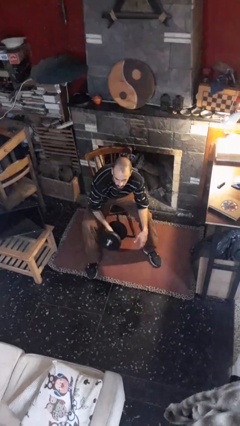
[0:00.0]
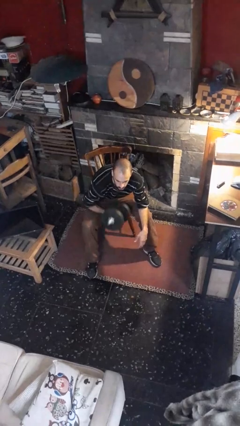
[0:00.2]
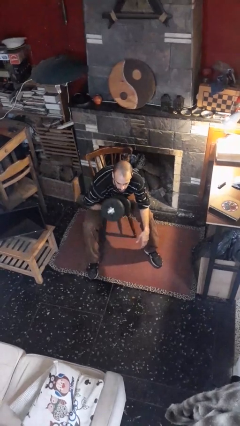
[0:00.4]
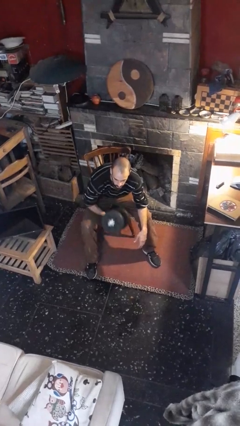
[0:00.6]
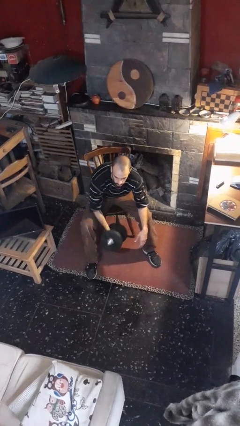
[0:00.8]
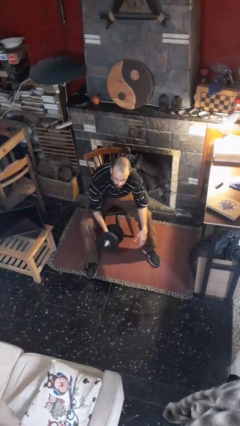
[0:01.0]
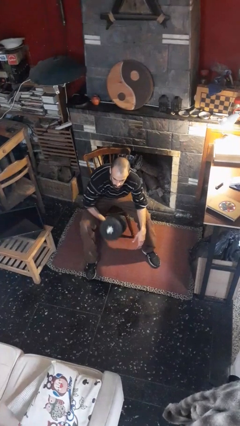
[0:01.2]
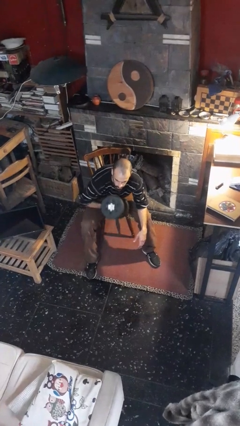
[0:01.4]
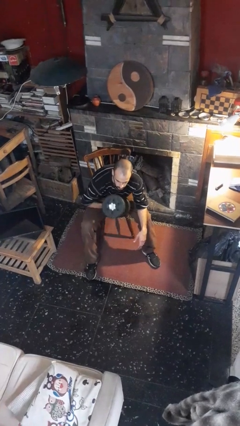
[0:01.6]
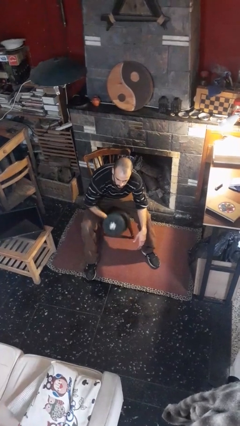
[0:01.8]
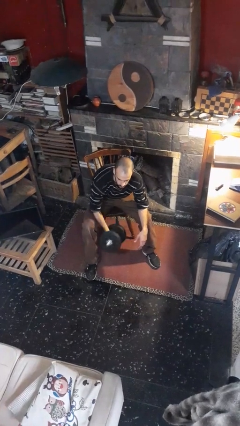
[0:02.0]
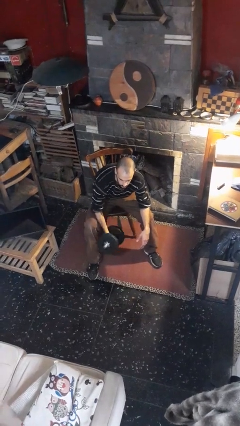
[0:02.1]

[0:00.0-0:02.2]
person lifts dumbbells

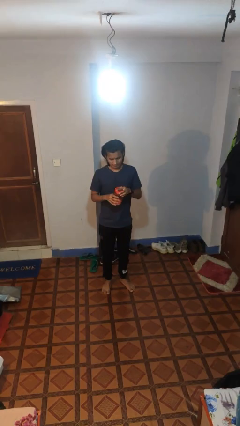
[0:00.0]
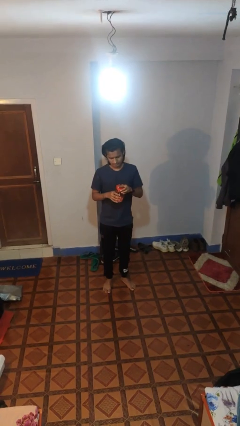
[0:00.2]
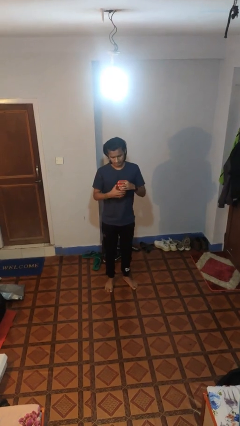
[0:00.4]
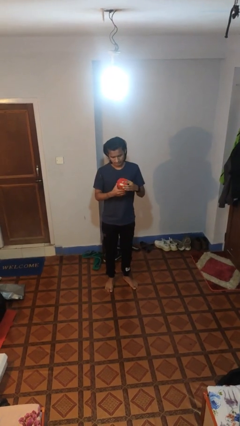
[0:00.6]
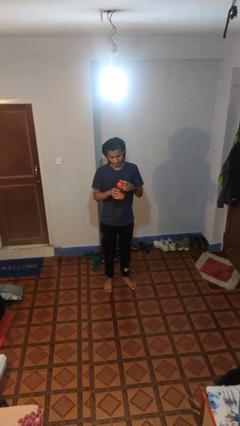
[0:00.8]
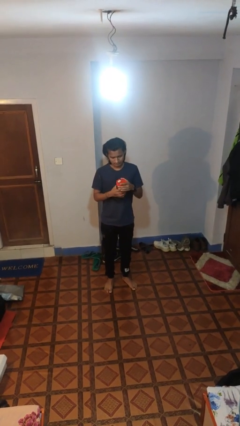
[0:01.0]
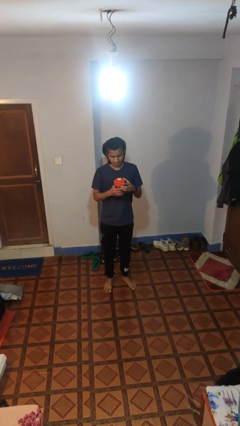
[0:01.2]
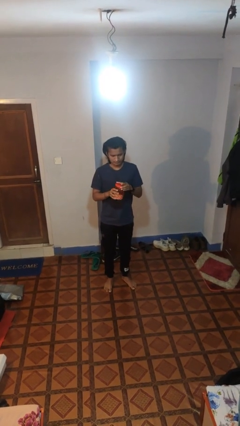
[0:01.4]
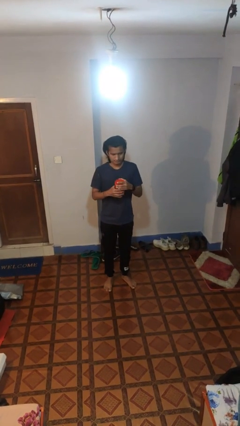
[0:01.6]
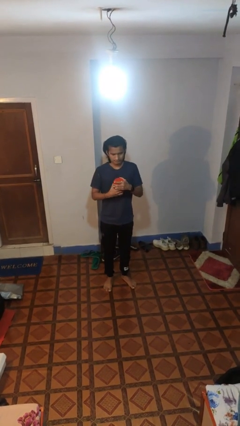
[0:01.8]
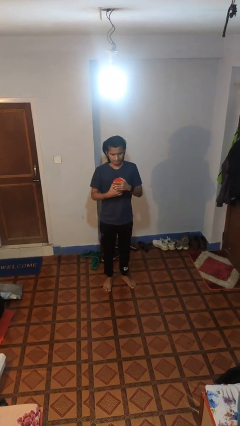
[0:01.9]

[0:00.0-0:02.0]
person closes jar

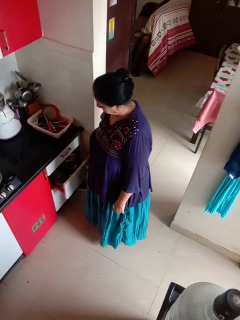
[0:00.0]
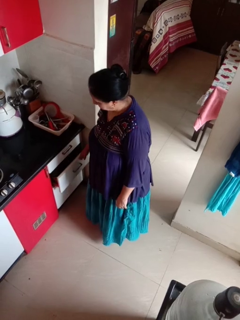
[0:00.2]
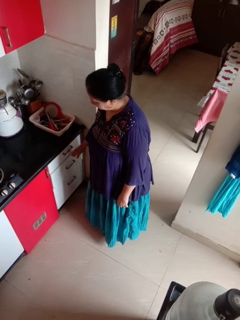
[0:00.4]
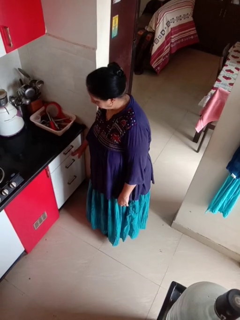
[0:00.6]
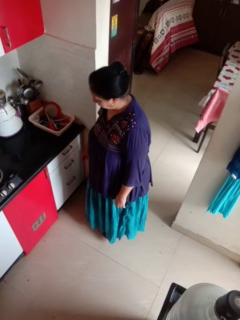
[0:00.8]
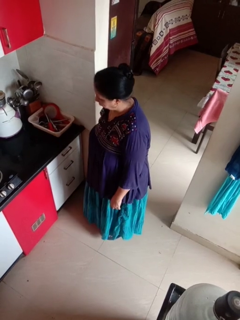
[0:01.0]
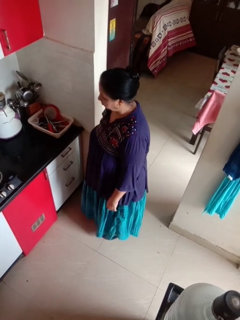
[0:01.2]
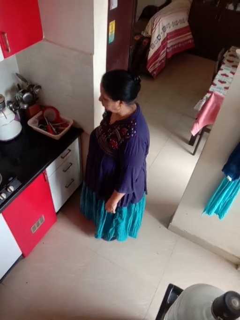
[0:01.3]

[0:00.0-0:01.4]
person closes kitchen drawer

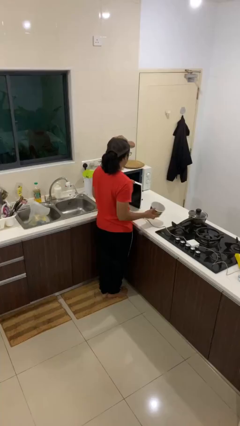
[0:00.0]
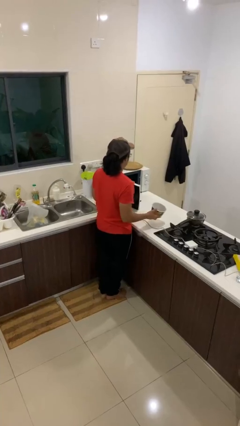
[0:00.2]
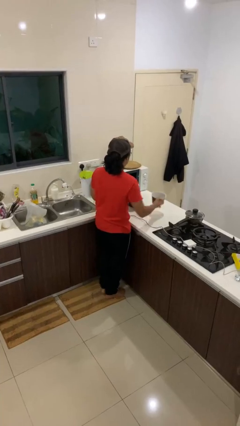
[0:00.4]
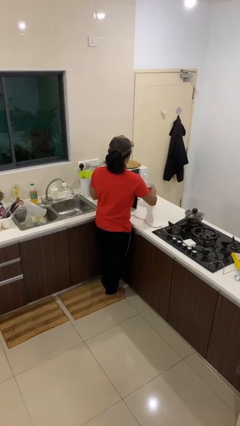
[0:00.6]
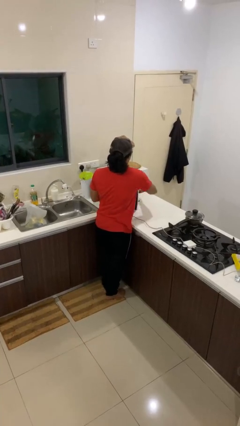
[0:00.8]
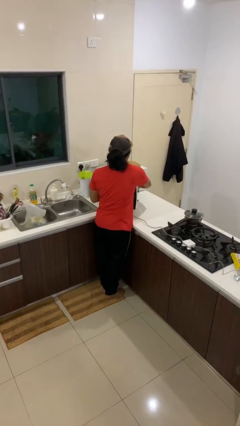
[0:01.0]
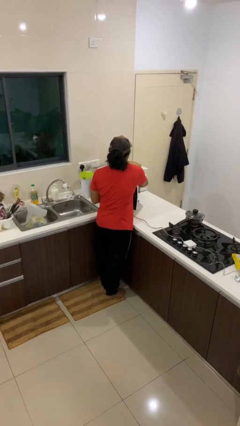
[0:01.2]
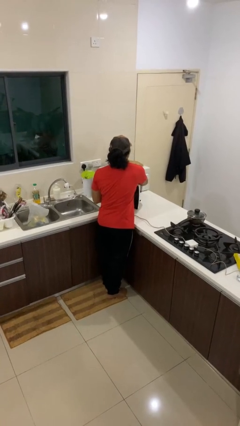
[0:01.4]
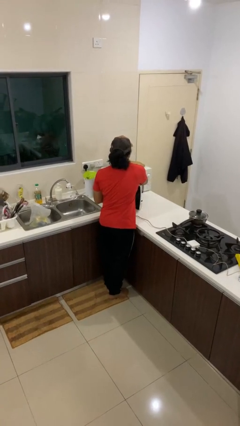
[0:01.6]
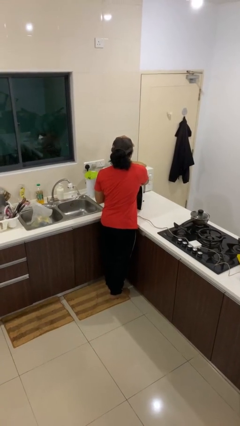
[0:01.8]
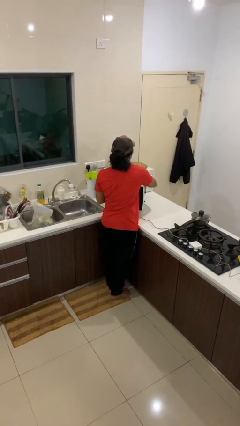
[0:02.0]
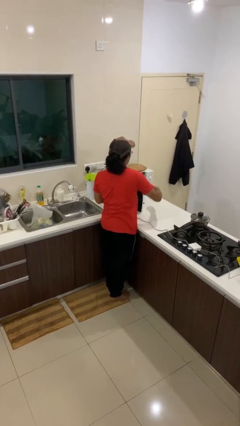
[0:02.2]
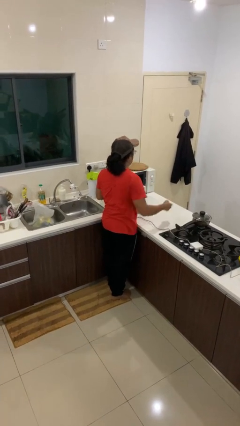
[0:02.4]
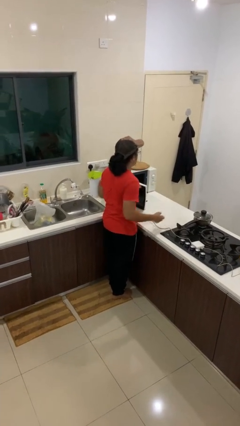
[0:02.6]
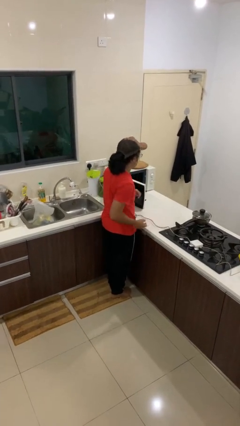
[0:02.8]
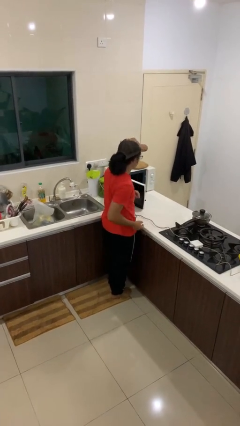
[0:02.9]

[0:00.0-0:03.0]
person puts object into microwave

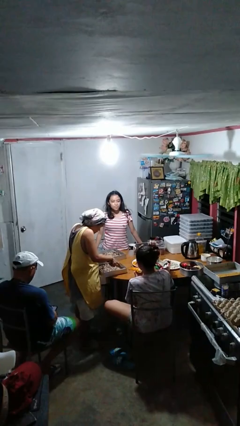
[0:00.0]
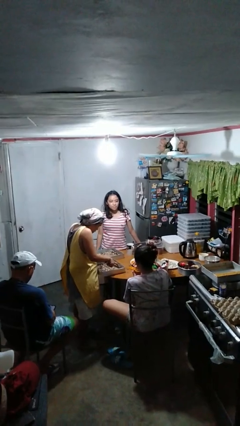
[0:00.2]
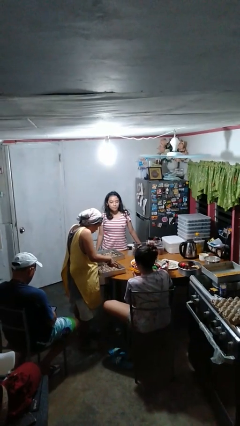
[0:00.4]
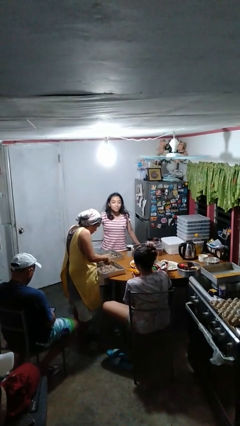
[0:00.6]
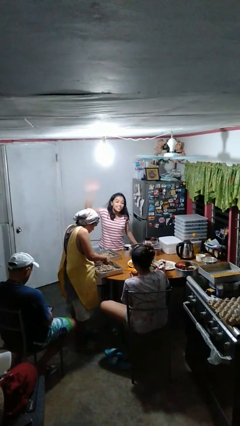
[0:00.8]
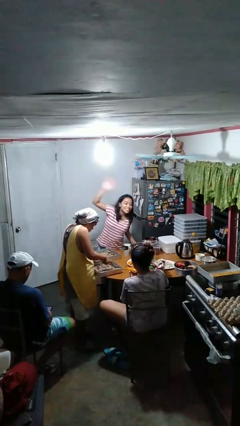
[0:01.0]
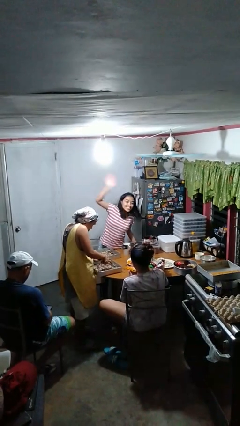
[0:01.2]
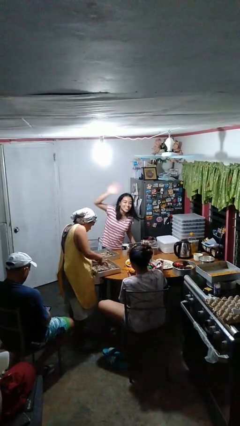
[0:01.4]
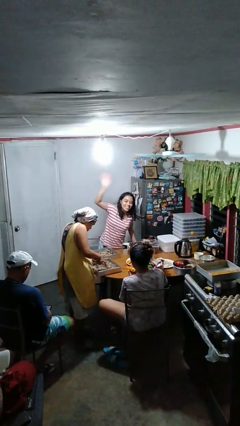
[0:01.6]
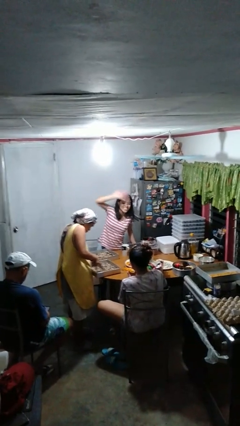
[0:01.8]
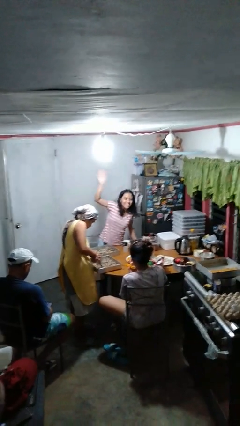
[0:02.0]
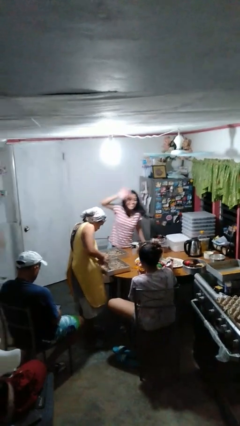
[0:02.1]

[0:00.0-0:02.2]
person waves at person

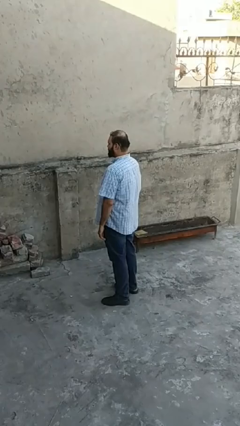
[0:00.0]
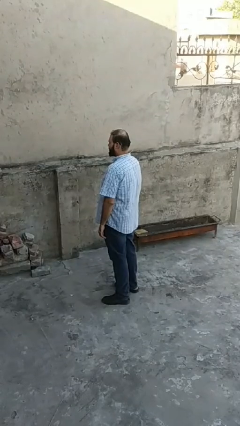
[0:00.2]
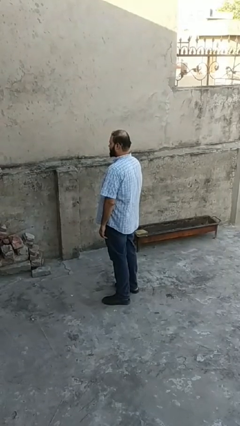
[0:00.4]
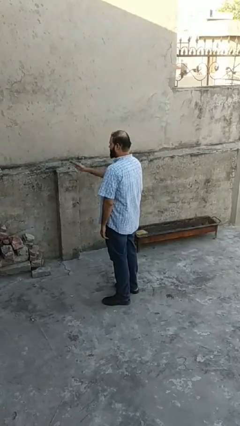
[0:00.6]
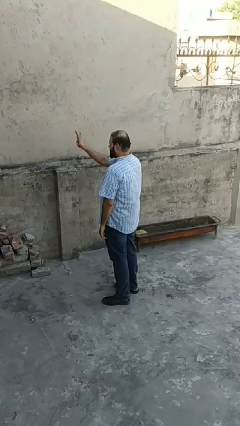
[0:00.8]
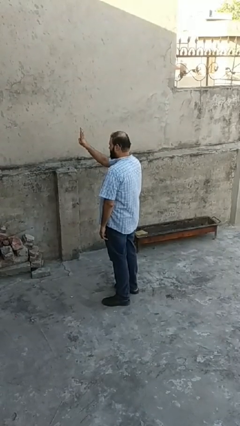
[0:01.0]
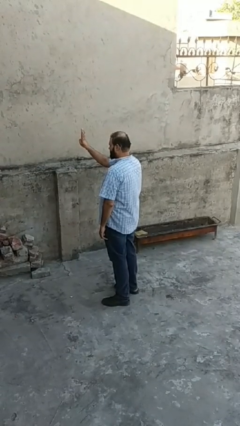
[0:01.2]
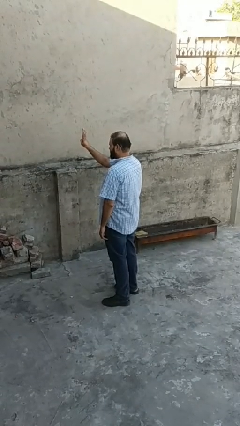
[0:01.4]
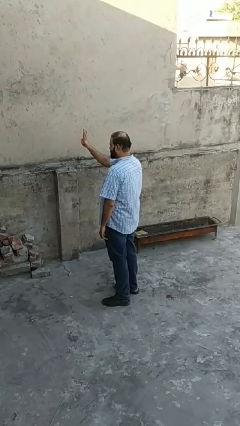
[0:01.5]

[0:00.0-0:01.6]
person gestures number four

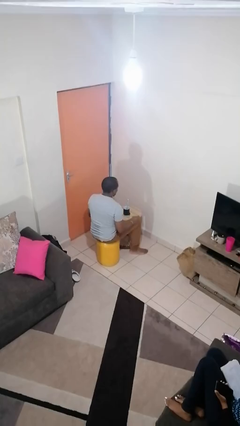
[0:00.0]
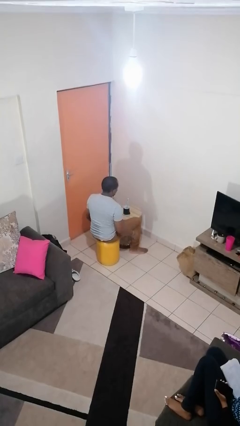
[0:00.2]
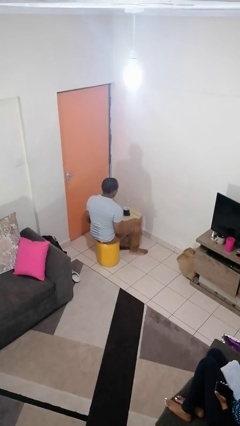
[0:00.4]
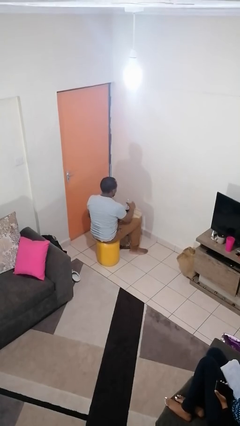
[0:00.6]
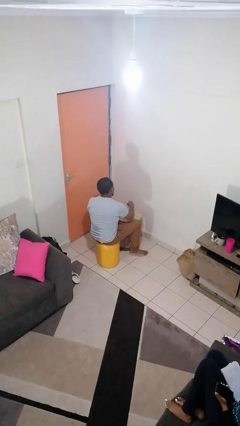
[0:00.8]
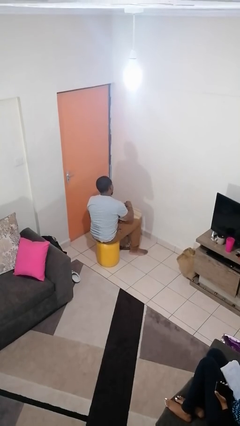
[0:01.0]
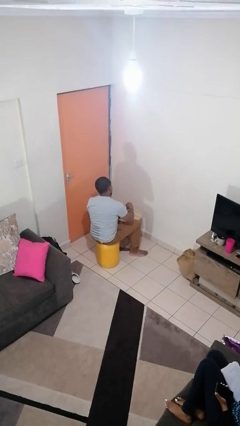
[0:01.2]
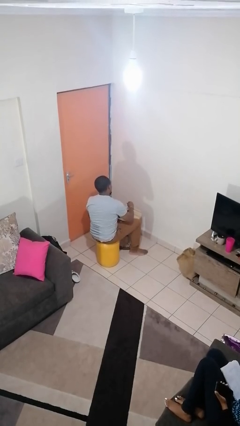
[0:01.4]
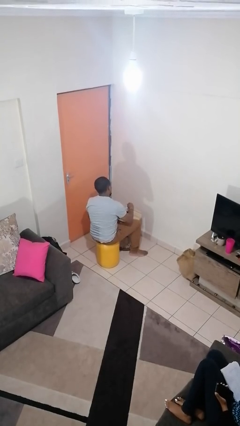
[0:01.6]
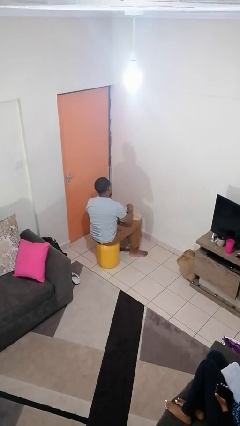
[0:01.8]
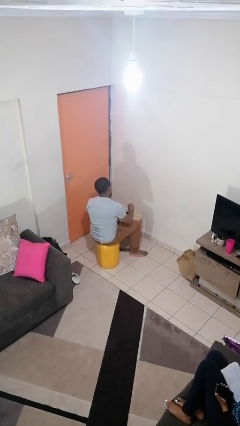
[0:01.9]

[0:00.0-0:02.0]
person stirs mug

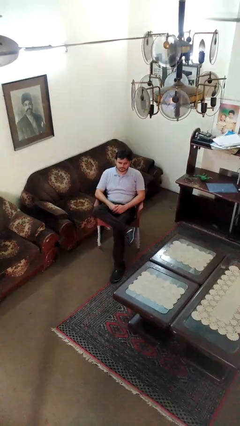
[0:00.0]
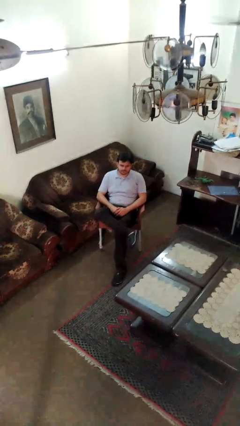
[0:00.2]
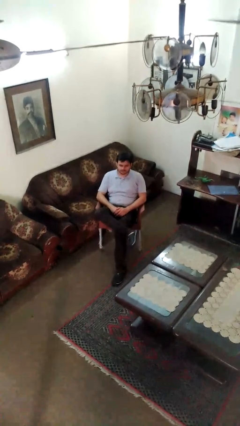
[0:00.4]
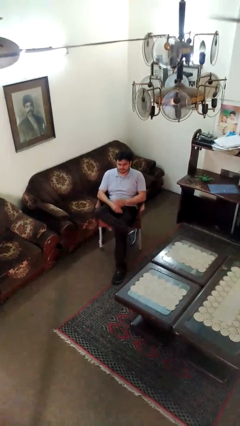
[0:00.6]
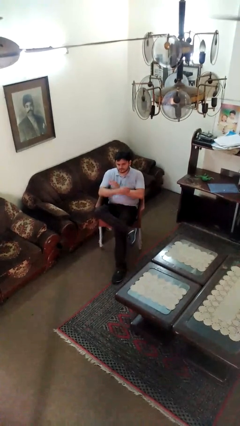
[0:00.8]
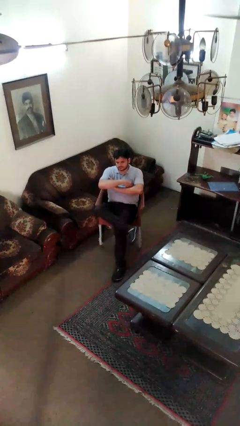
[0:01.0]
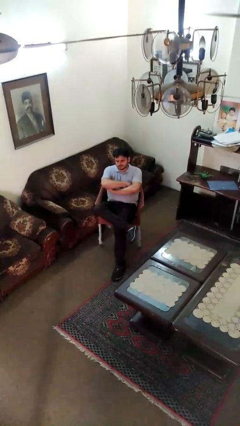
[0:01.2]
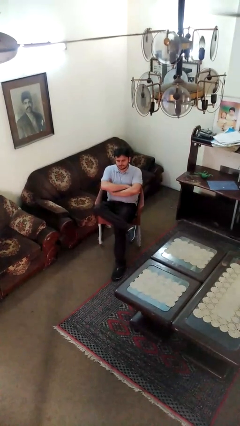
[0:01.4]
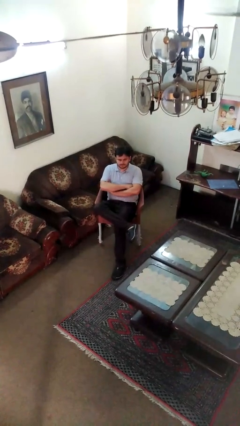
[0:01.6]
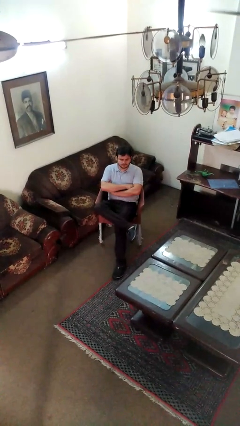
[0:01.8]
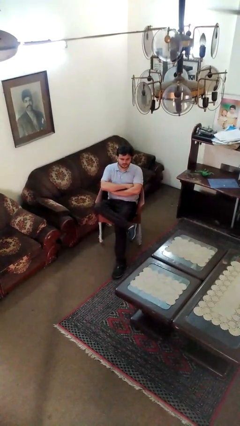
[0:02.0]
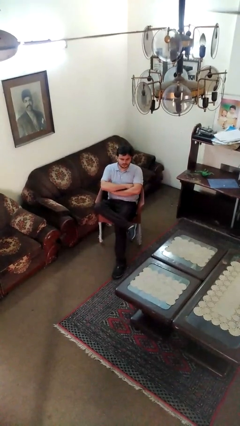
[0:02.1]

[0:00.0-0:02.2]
person crosses arms

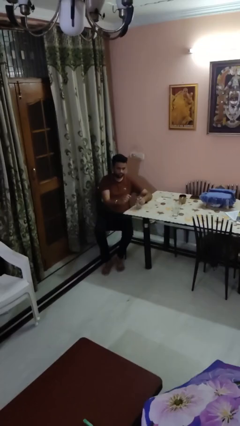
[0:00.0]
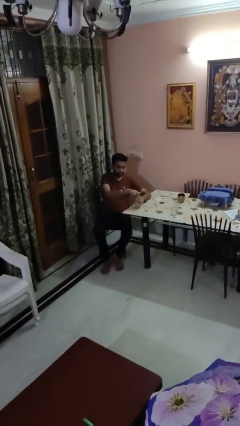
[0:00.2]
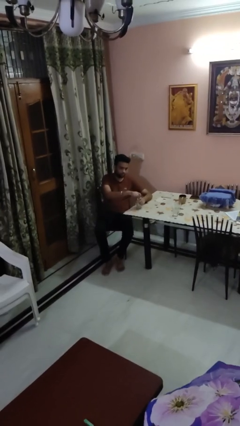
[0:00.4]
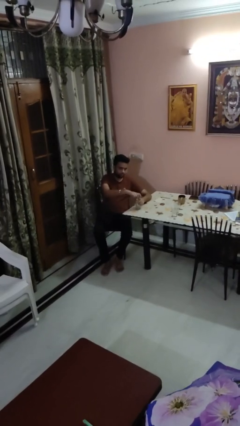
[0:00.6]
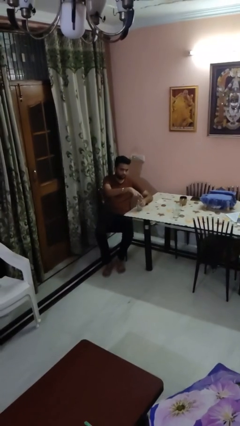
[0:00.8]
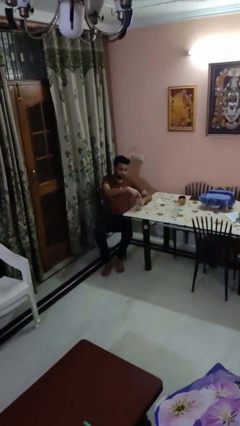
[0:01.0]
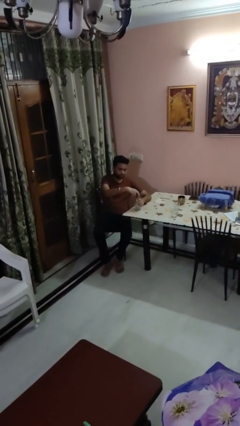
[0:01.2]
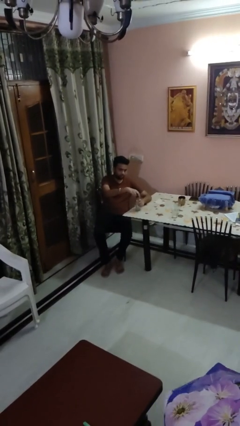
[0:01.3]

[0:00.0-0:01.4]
person unscrews lid from bottle
